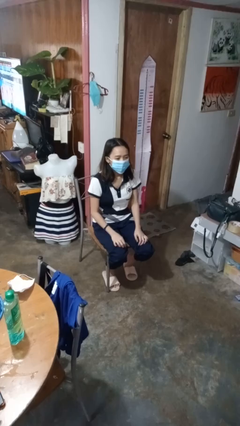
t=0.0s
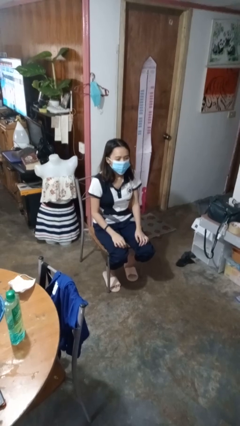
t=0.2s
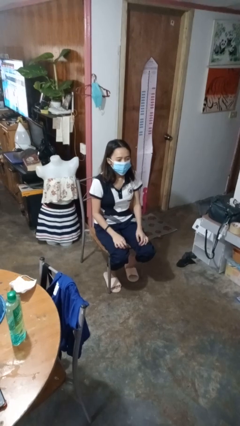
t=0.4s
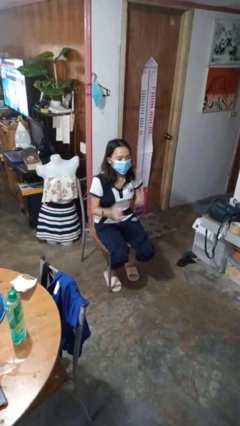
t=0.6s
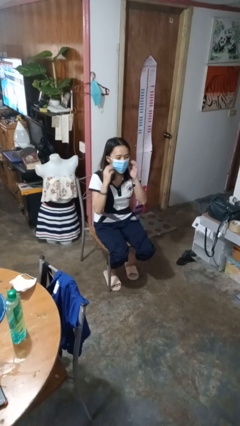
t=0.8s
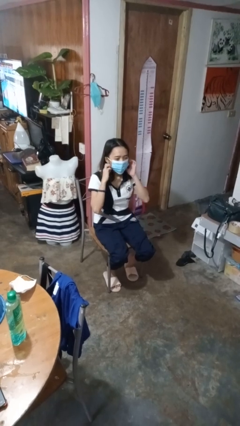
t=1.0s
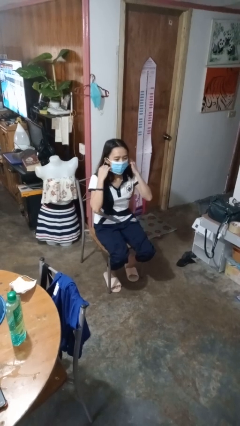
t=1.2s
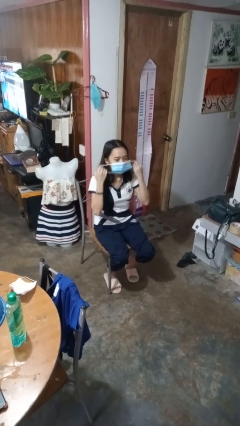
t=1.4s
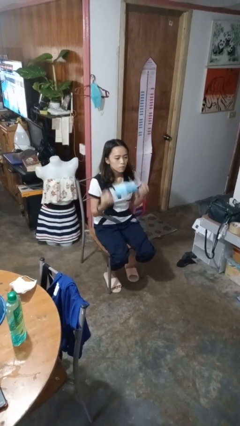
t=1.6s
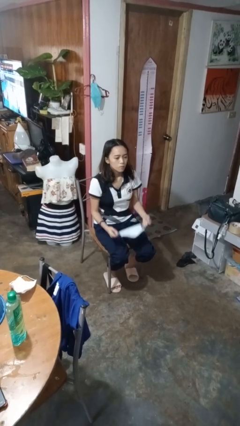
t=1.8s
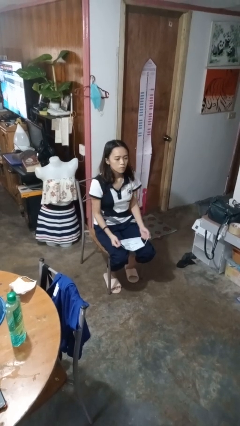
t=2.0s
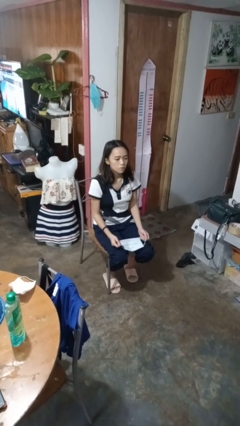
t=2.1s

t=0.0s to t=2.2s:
person takes off facemask

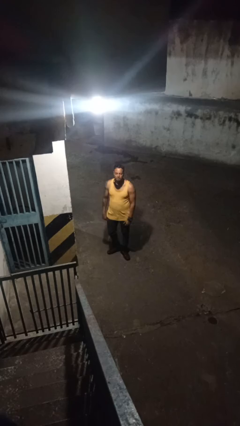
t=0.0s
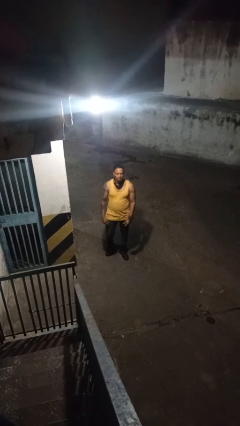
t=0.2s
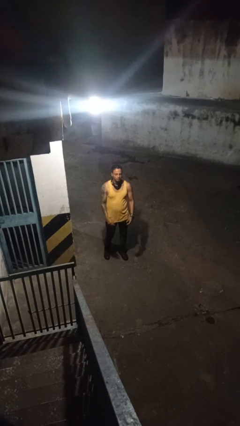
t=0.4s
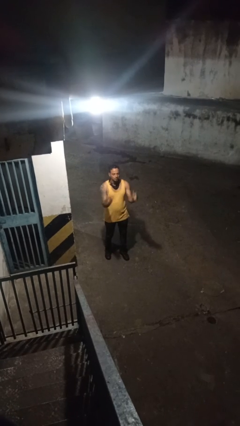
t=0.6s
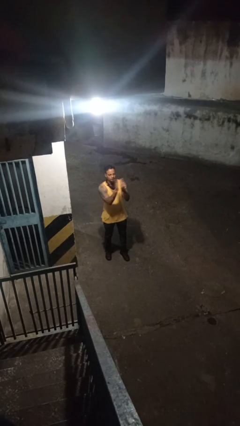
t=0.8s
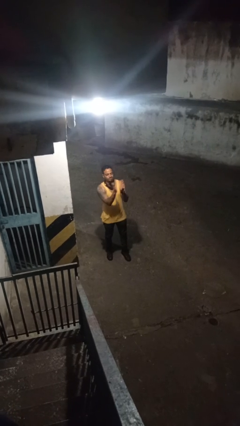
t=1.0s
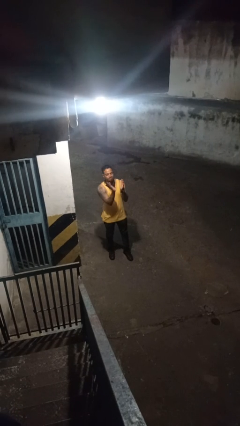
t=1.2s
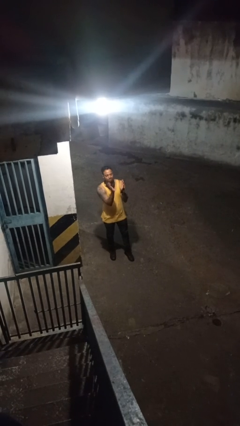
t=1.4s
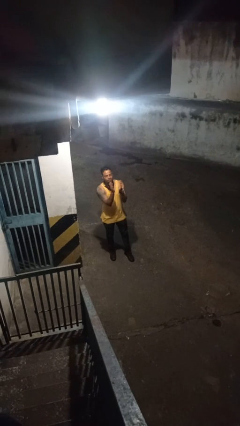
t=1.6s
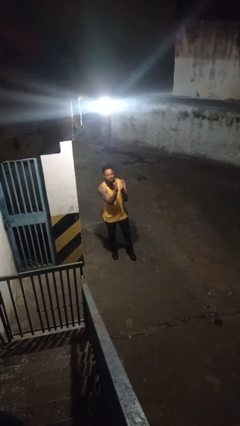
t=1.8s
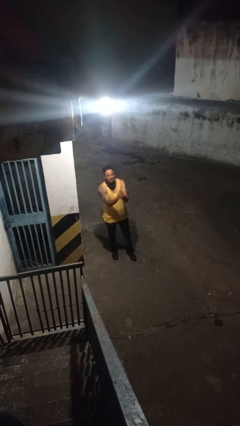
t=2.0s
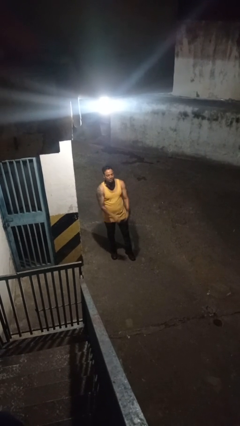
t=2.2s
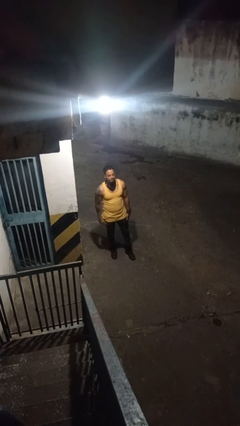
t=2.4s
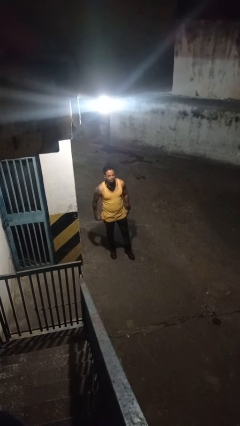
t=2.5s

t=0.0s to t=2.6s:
person claps hands

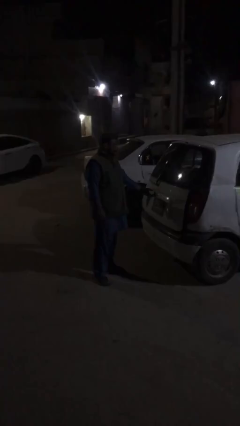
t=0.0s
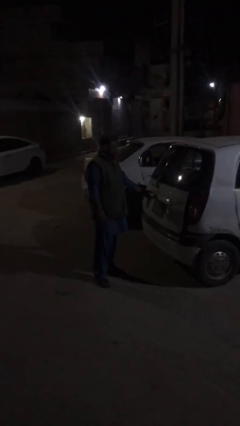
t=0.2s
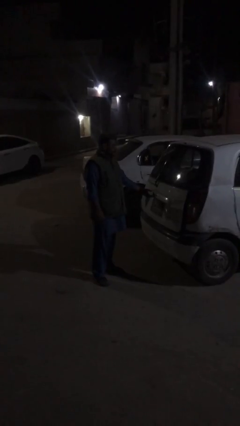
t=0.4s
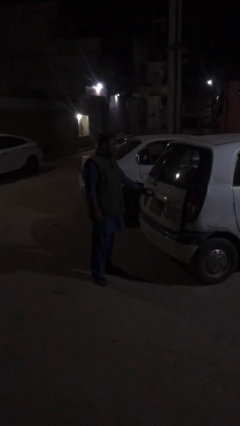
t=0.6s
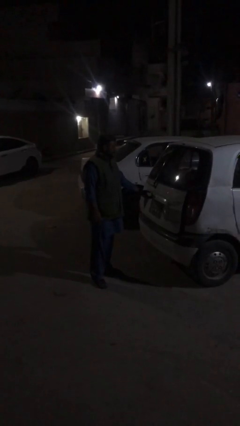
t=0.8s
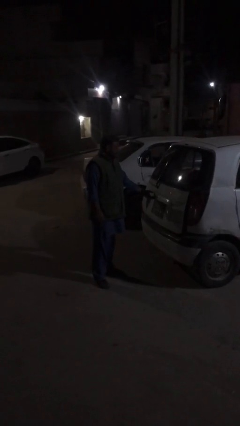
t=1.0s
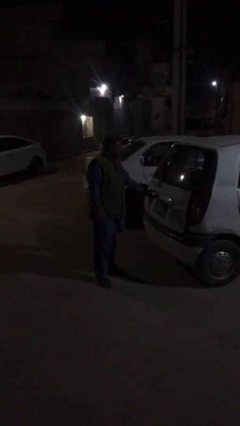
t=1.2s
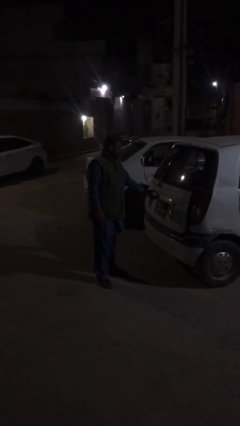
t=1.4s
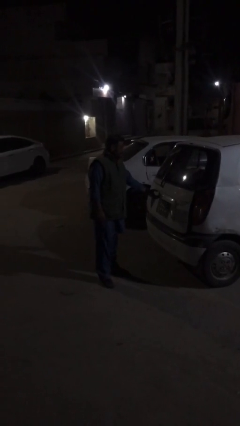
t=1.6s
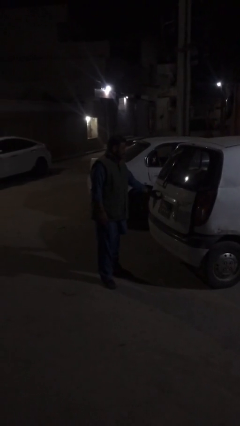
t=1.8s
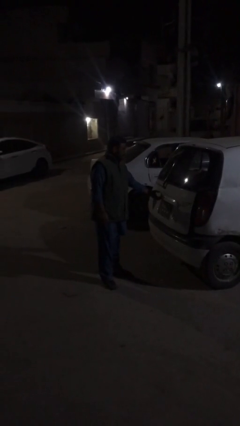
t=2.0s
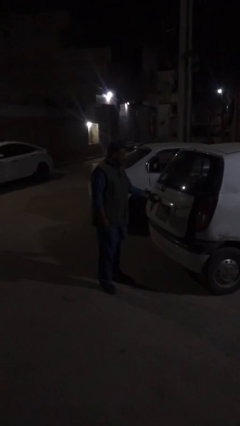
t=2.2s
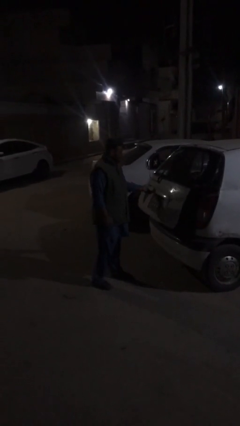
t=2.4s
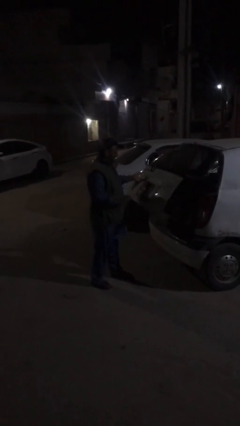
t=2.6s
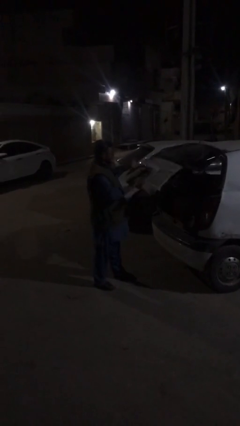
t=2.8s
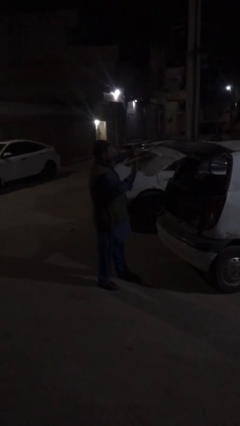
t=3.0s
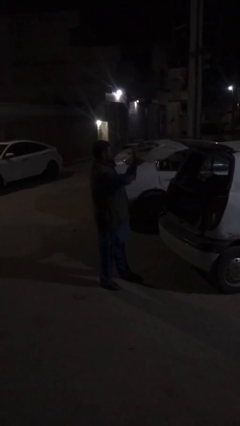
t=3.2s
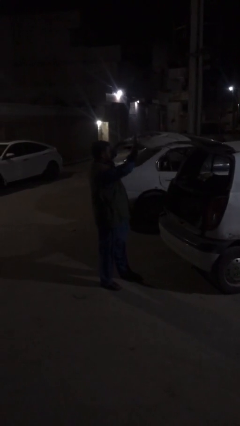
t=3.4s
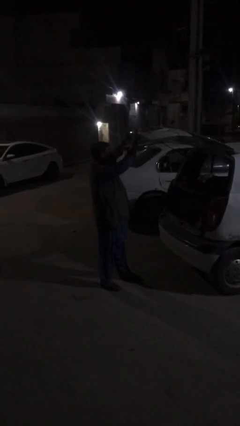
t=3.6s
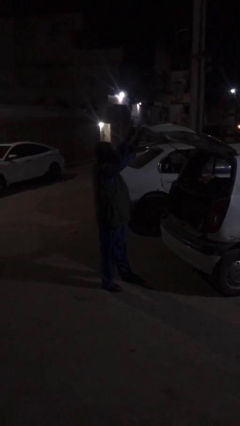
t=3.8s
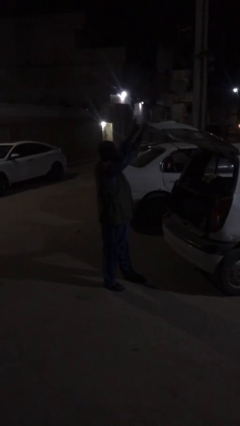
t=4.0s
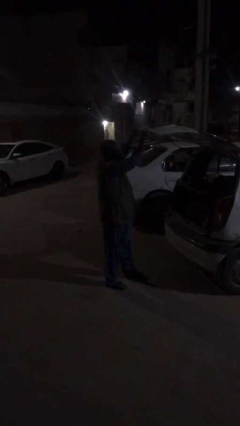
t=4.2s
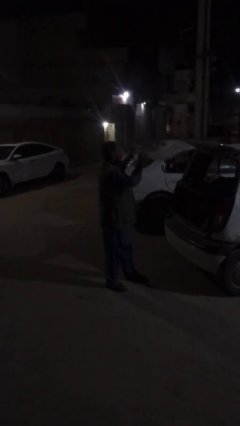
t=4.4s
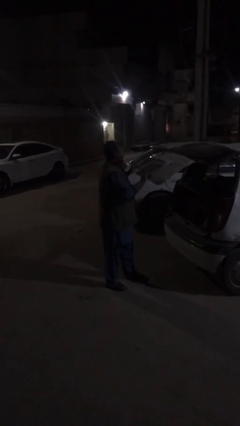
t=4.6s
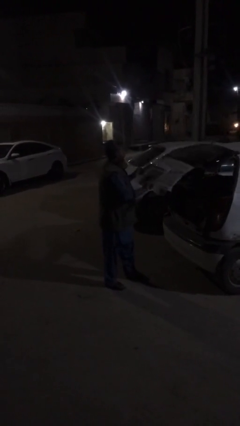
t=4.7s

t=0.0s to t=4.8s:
person opens car trunk

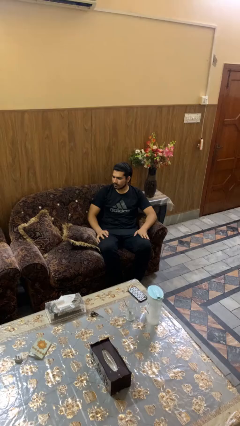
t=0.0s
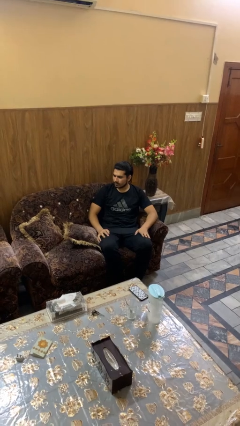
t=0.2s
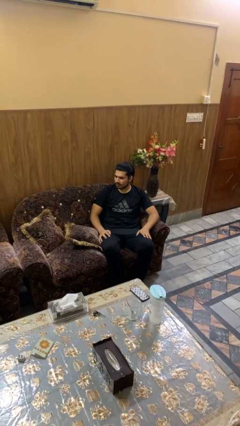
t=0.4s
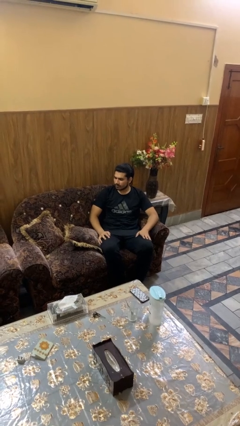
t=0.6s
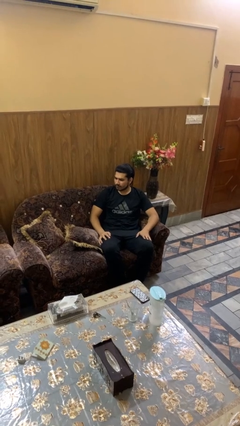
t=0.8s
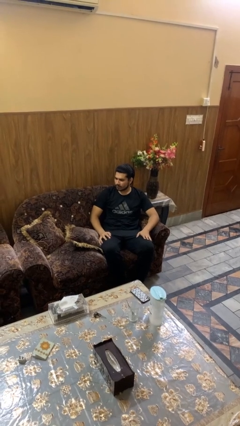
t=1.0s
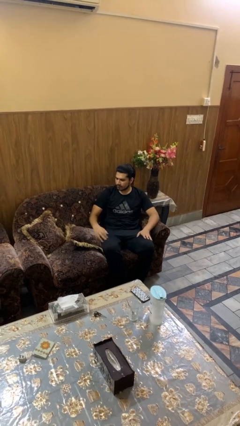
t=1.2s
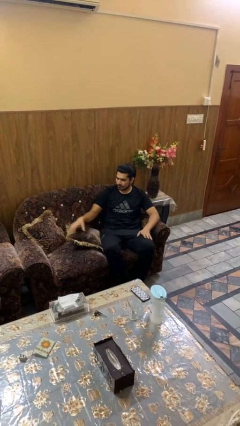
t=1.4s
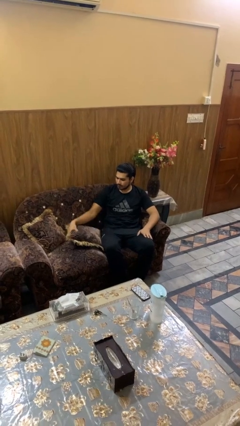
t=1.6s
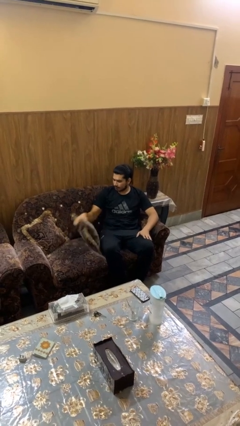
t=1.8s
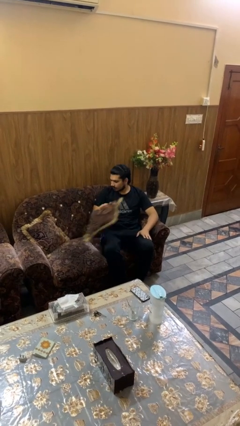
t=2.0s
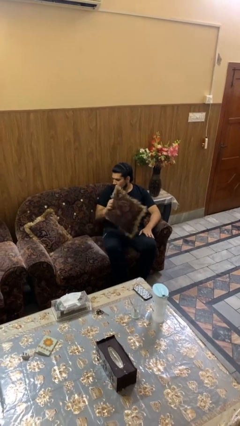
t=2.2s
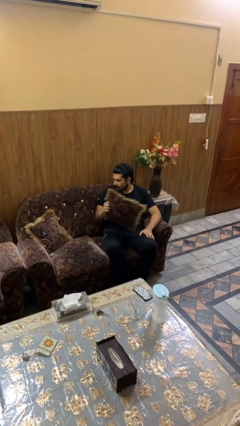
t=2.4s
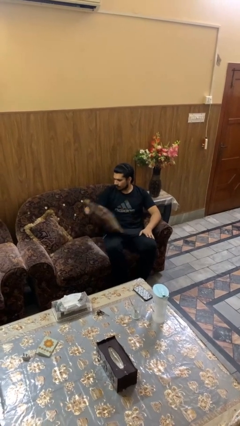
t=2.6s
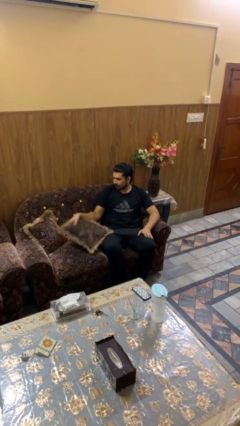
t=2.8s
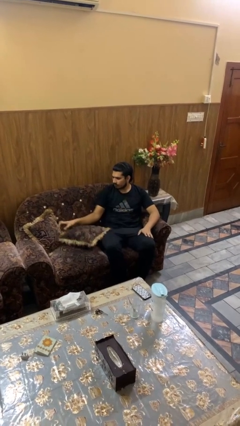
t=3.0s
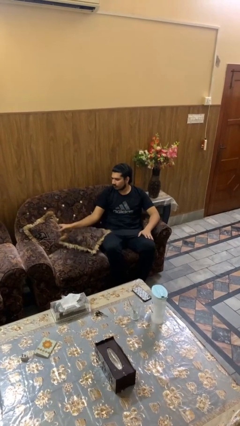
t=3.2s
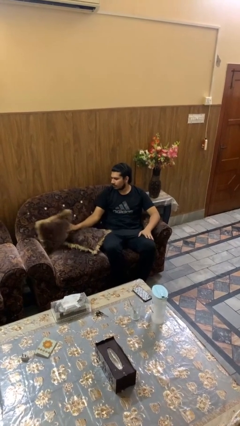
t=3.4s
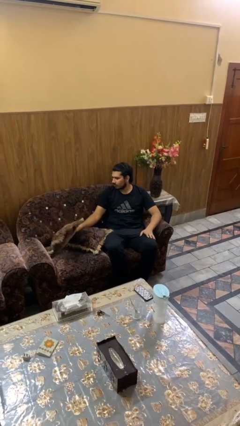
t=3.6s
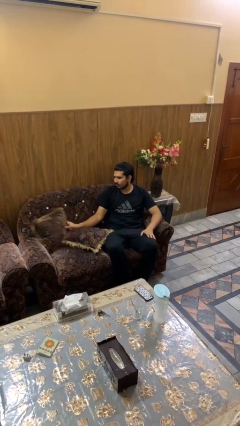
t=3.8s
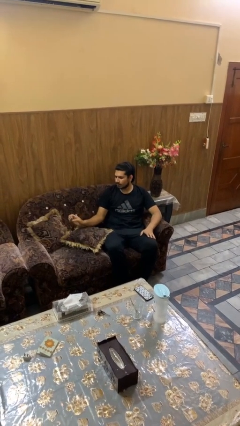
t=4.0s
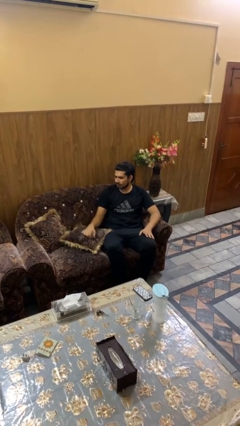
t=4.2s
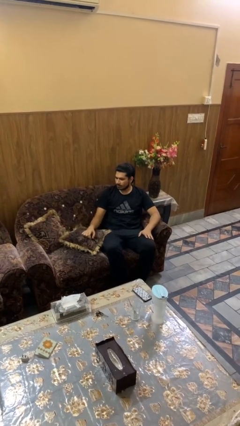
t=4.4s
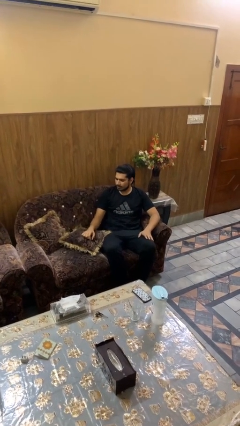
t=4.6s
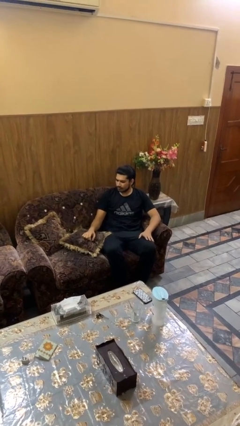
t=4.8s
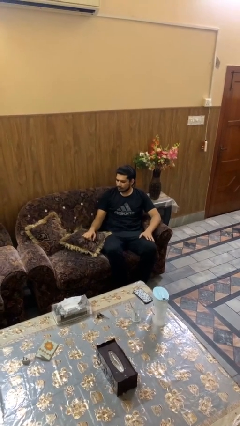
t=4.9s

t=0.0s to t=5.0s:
person searches in couch

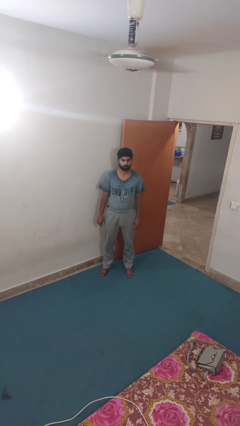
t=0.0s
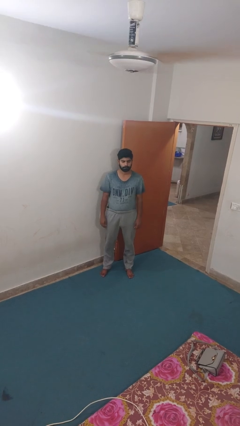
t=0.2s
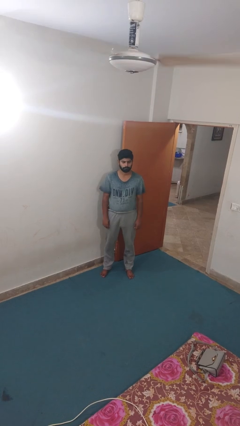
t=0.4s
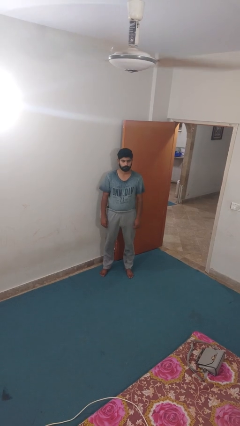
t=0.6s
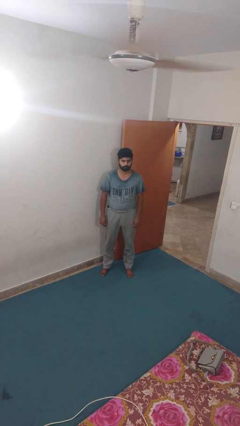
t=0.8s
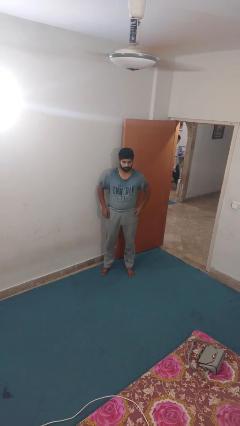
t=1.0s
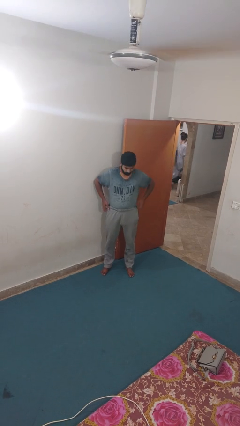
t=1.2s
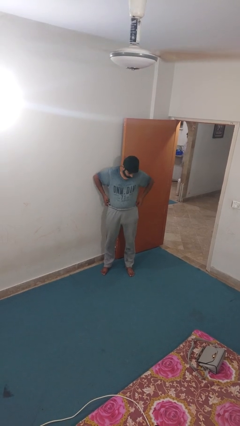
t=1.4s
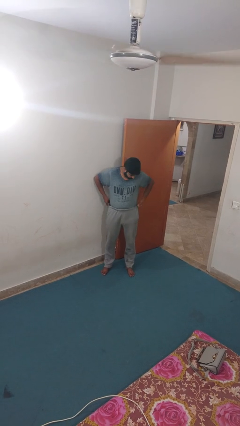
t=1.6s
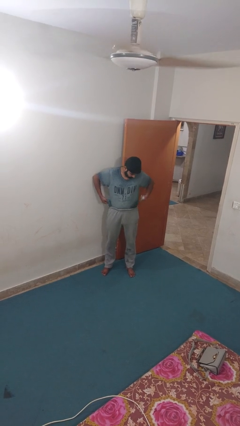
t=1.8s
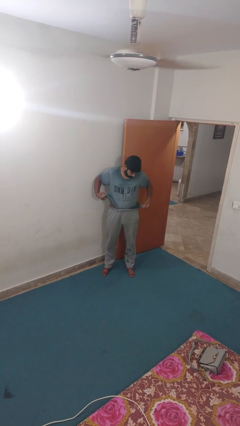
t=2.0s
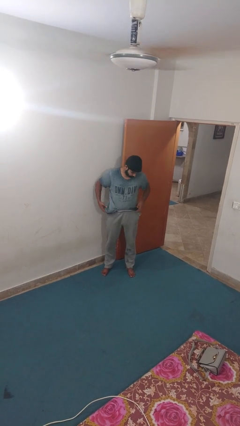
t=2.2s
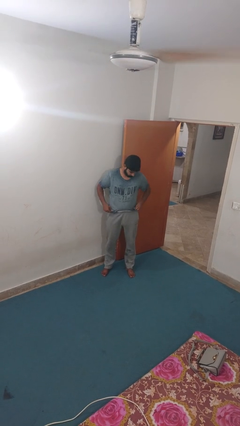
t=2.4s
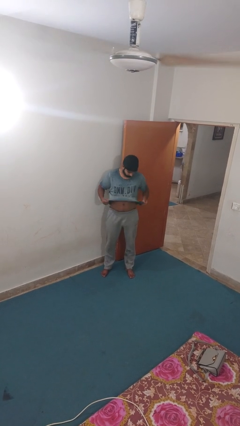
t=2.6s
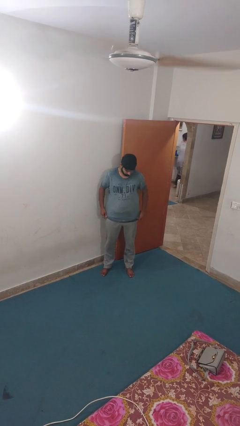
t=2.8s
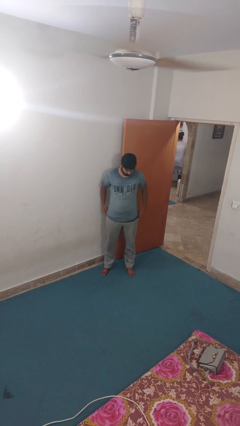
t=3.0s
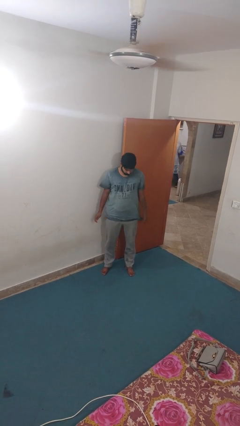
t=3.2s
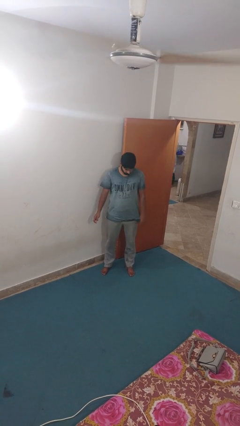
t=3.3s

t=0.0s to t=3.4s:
person untucks shirt
